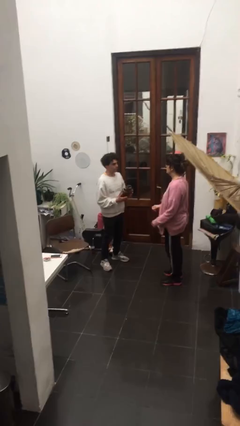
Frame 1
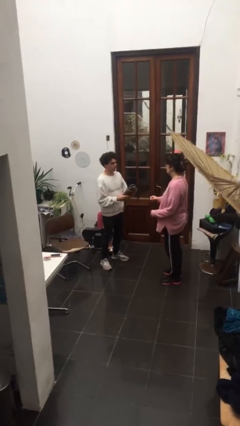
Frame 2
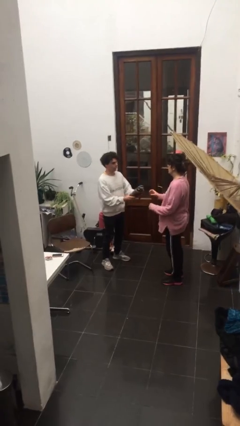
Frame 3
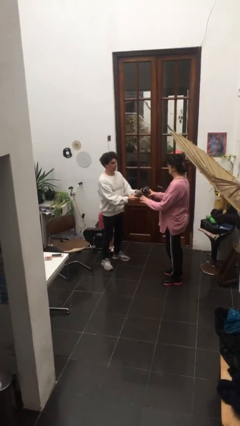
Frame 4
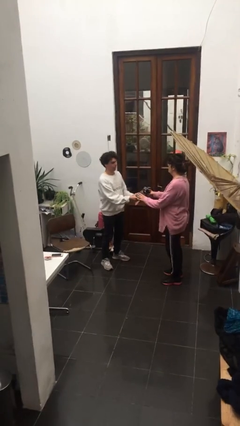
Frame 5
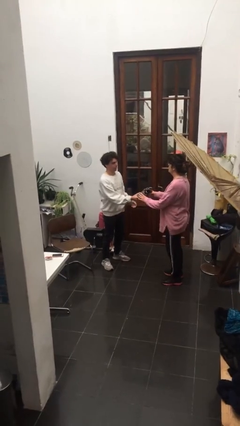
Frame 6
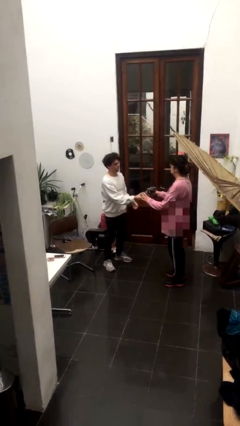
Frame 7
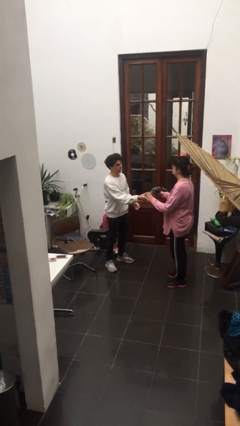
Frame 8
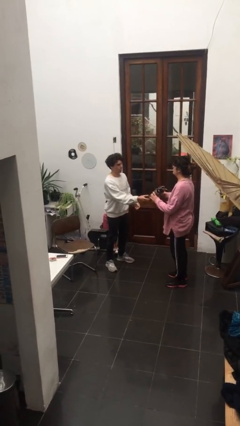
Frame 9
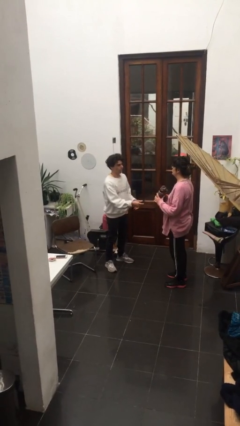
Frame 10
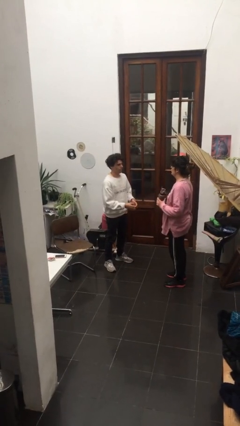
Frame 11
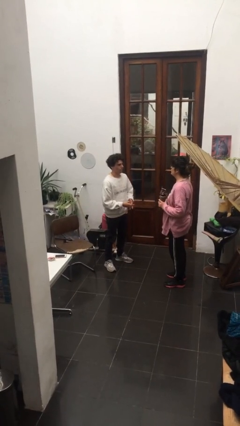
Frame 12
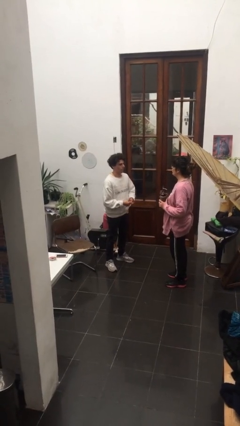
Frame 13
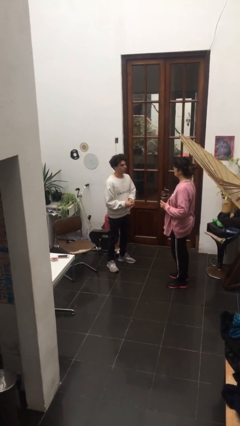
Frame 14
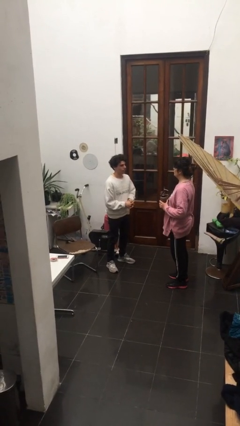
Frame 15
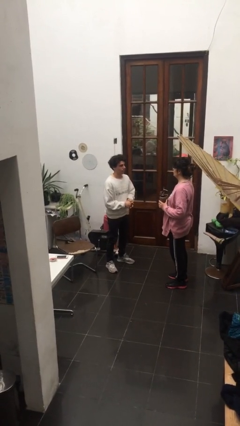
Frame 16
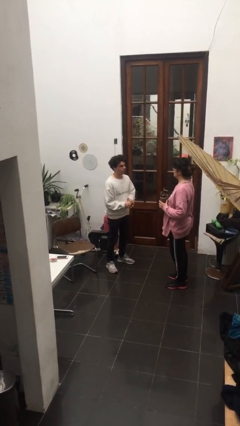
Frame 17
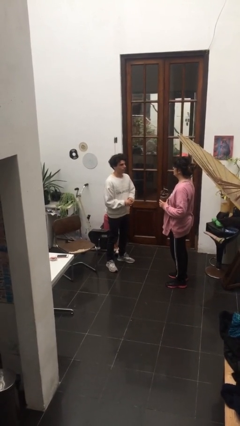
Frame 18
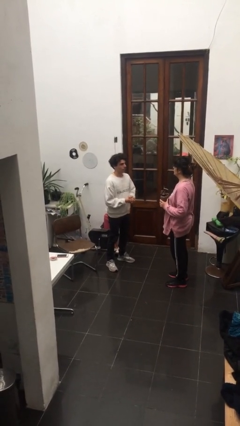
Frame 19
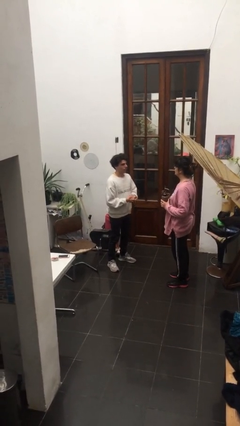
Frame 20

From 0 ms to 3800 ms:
person transfers object to person

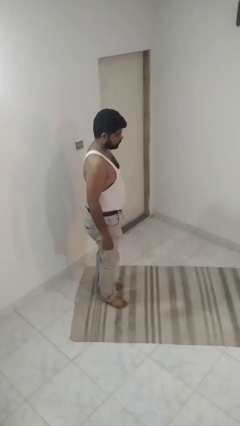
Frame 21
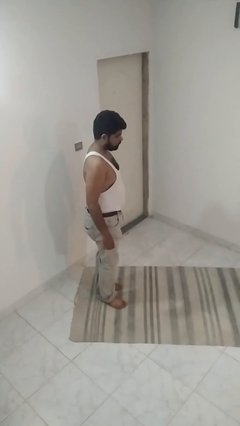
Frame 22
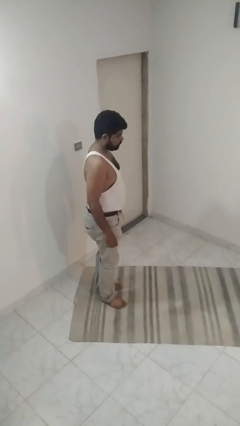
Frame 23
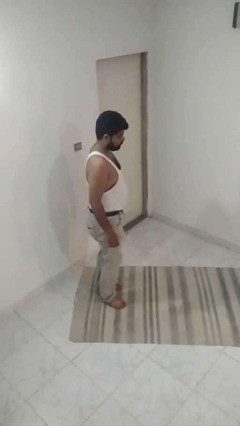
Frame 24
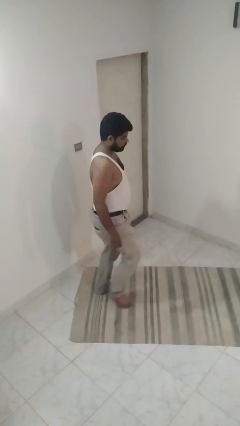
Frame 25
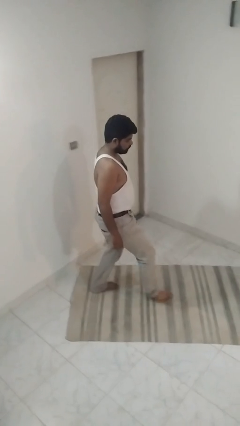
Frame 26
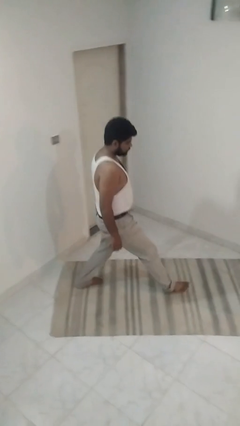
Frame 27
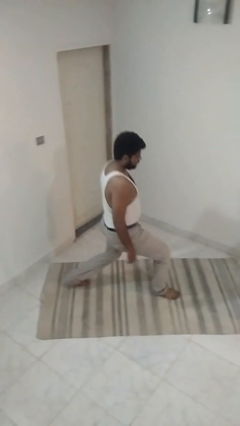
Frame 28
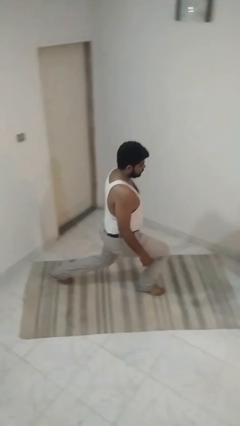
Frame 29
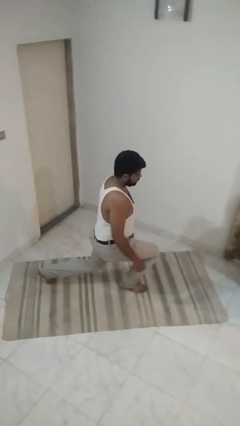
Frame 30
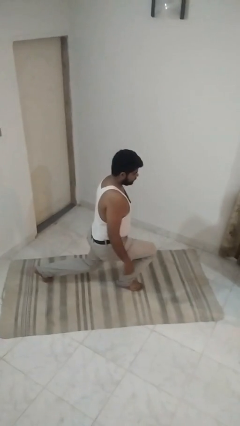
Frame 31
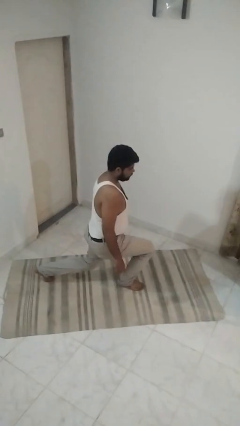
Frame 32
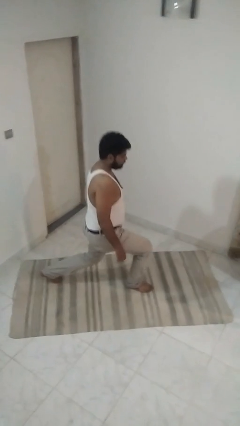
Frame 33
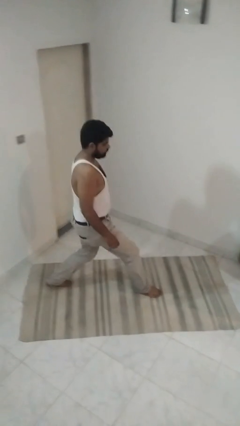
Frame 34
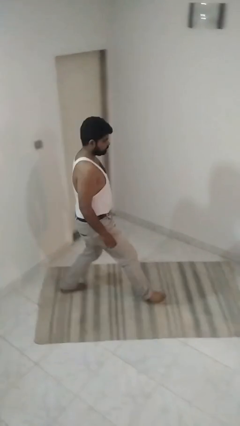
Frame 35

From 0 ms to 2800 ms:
person exercises with lunges

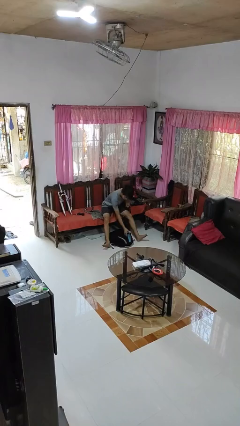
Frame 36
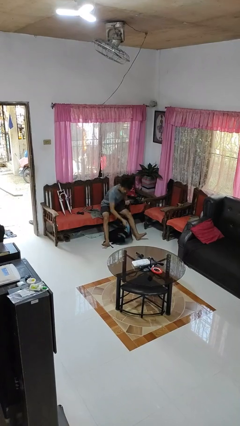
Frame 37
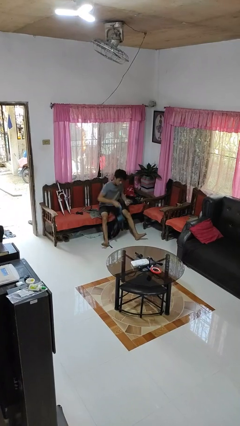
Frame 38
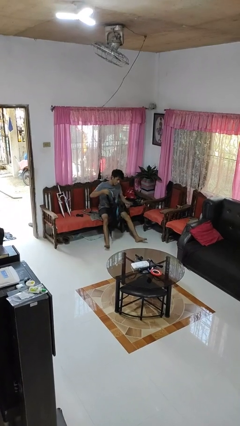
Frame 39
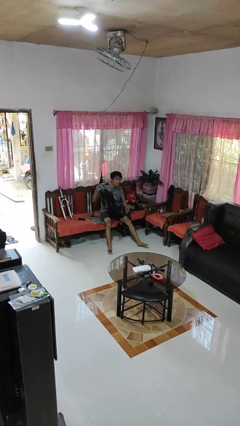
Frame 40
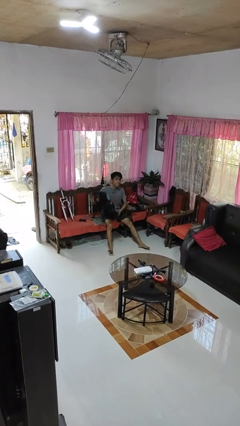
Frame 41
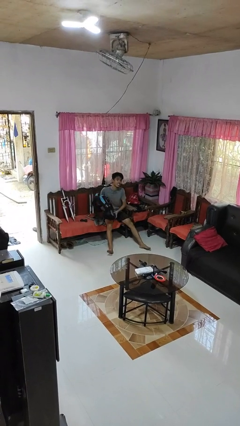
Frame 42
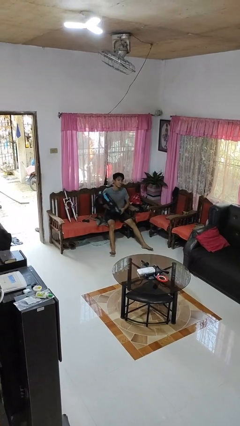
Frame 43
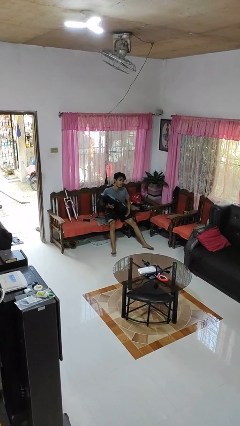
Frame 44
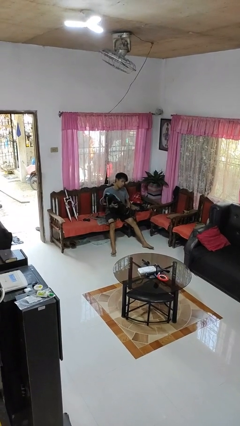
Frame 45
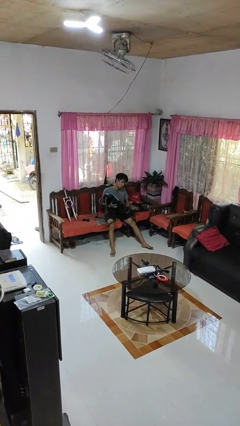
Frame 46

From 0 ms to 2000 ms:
person picks up object from floor

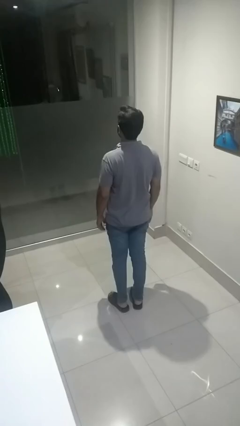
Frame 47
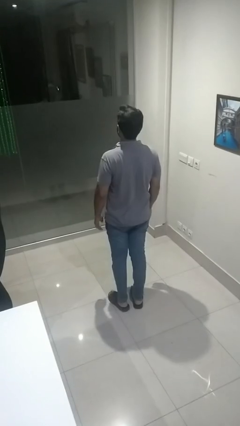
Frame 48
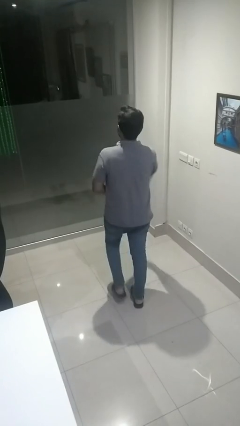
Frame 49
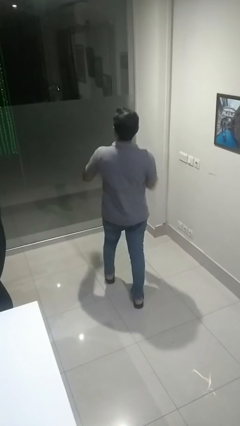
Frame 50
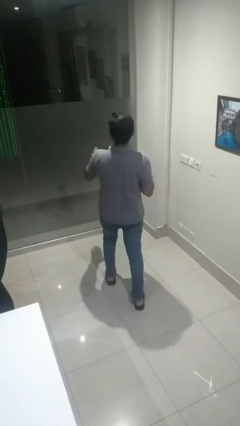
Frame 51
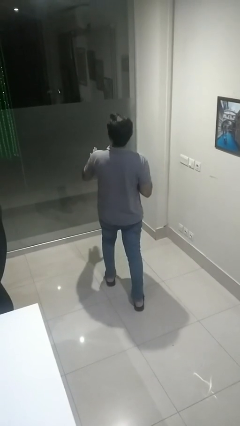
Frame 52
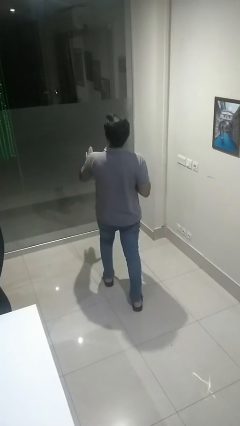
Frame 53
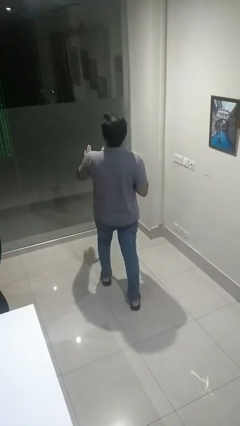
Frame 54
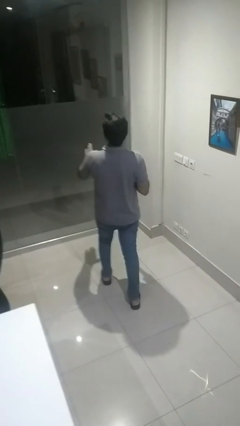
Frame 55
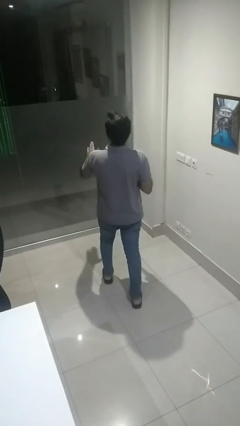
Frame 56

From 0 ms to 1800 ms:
person karate chop

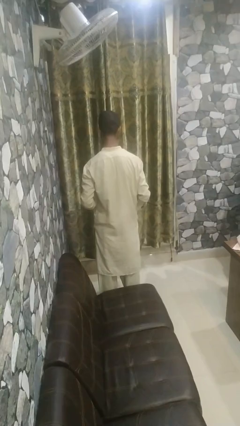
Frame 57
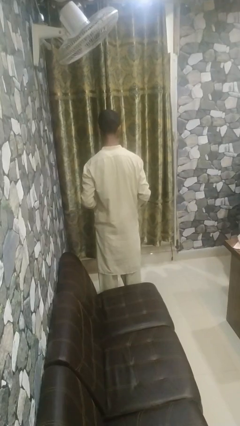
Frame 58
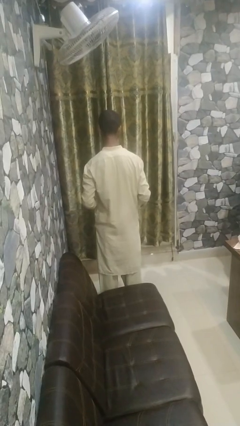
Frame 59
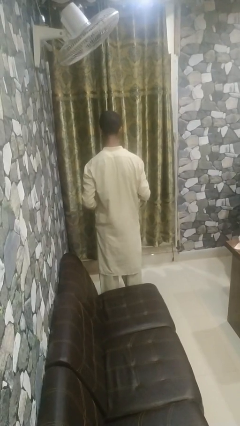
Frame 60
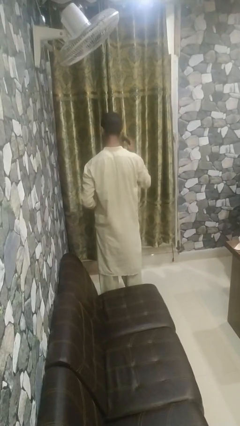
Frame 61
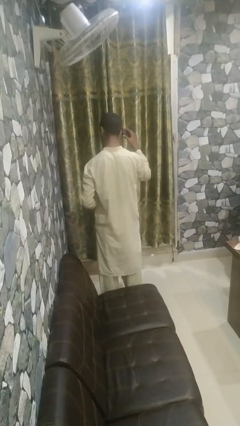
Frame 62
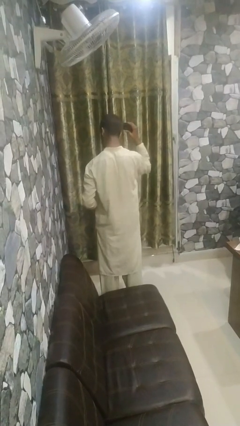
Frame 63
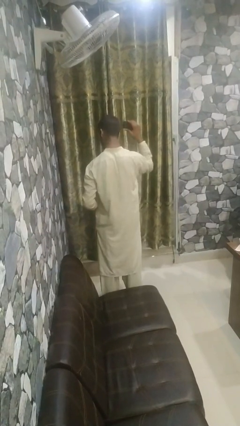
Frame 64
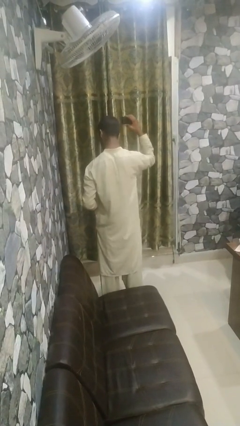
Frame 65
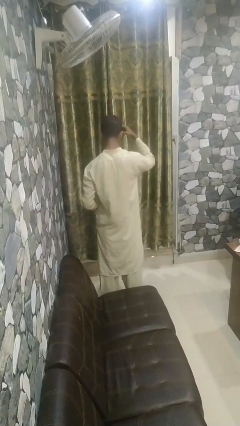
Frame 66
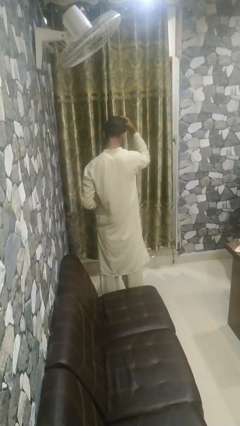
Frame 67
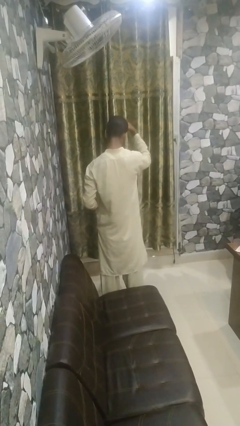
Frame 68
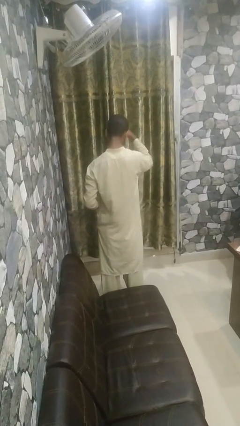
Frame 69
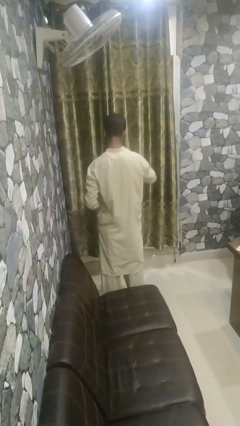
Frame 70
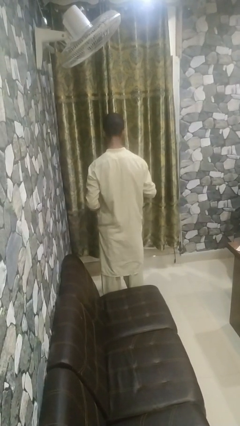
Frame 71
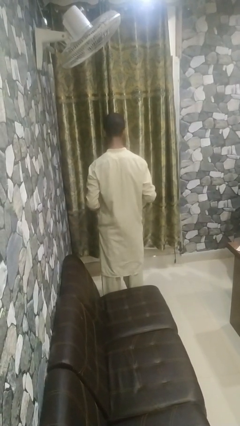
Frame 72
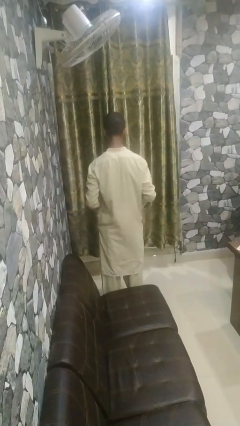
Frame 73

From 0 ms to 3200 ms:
person dries hair with hairdryer

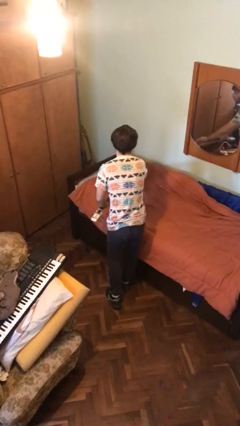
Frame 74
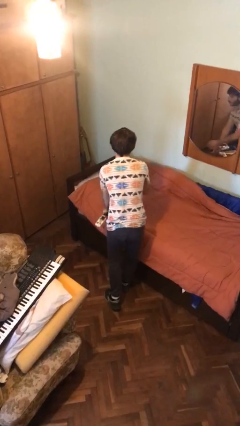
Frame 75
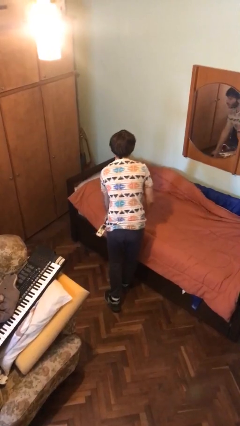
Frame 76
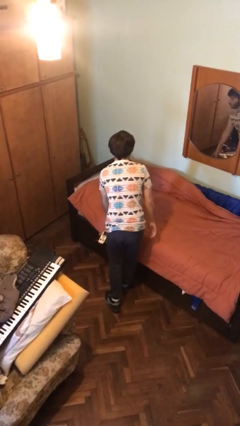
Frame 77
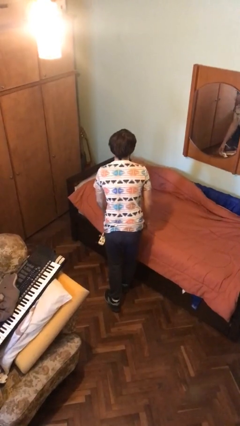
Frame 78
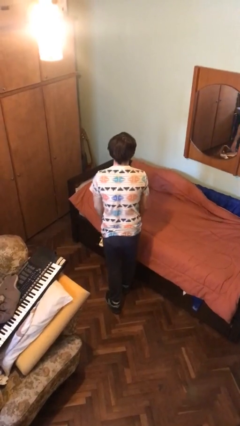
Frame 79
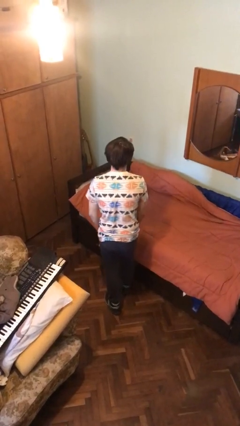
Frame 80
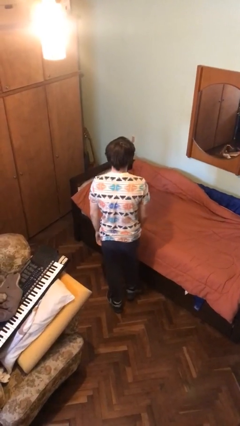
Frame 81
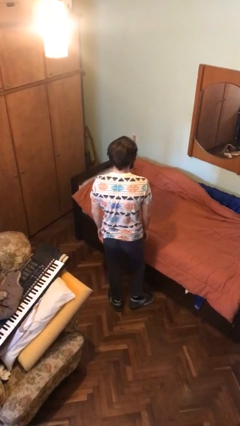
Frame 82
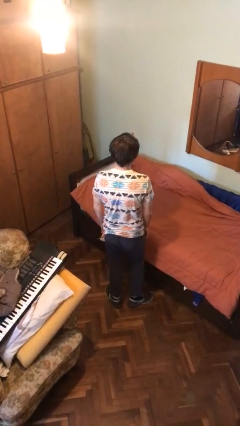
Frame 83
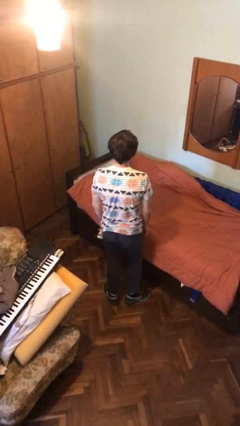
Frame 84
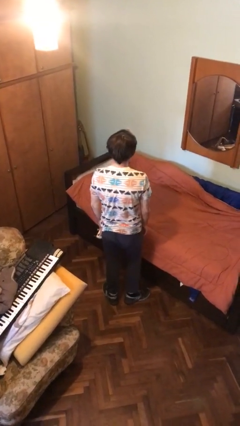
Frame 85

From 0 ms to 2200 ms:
person puts down object on bed

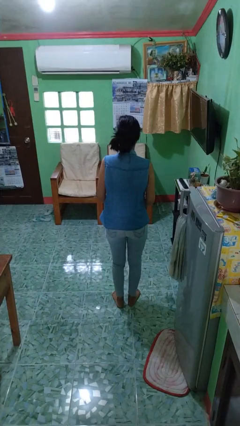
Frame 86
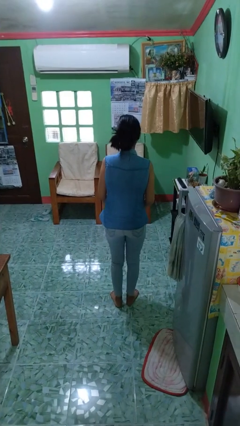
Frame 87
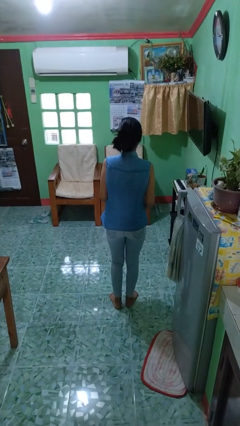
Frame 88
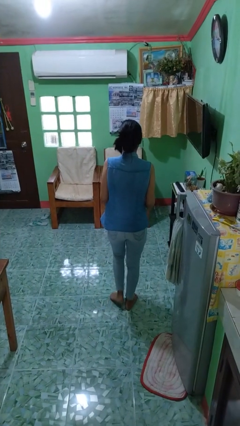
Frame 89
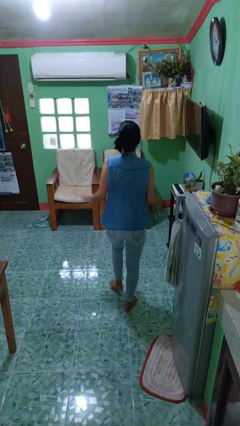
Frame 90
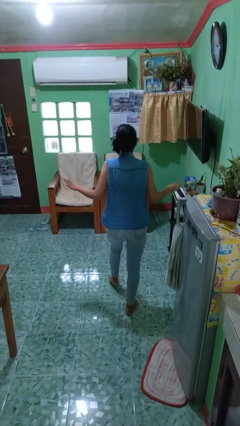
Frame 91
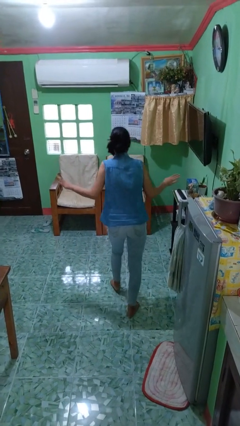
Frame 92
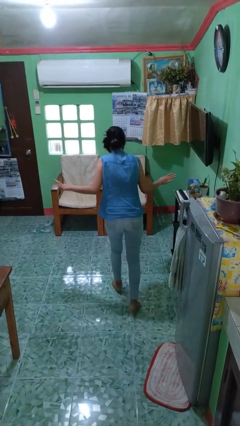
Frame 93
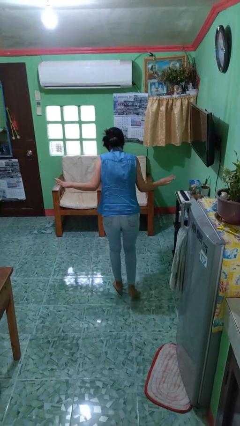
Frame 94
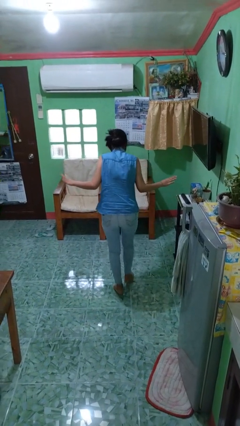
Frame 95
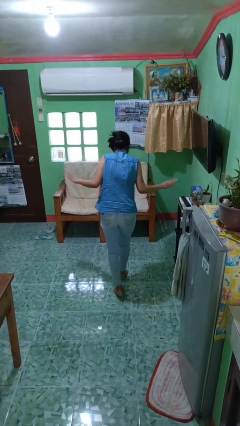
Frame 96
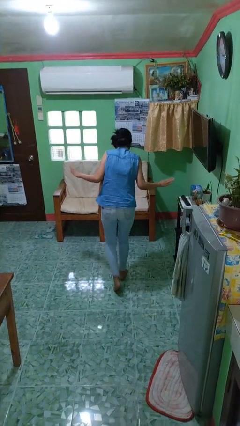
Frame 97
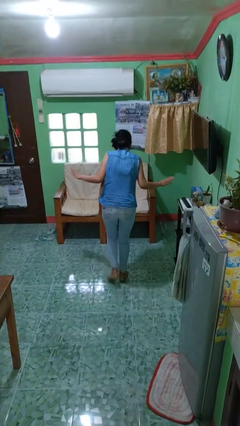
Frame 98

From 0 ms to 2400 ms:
person walks tiptoe
